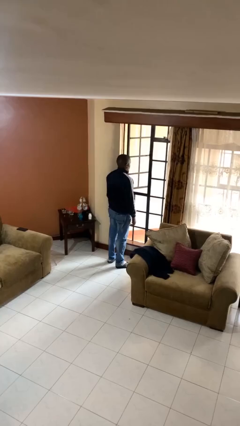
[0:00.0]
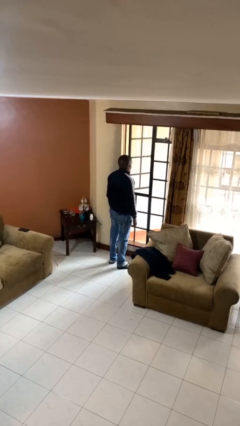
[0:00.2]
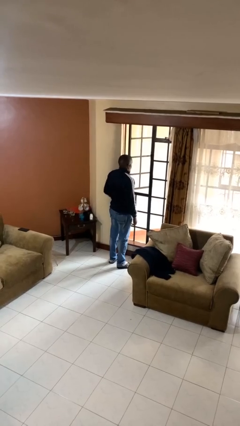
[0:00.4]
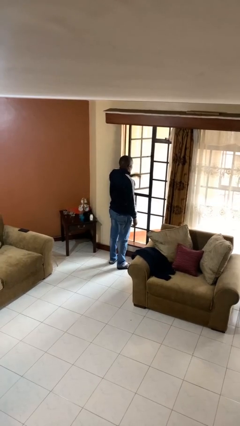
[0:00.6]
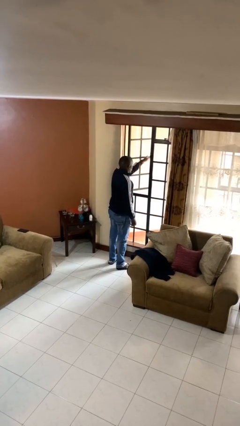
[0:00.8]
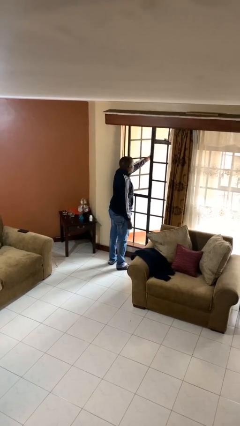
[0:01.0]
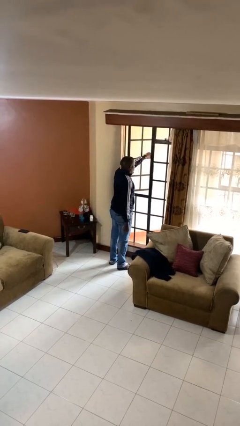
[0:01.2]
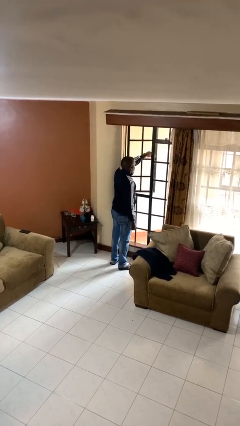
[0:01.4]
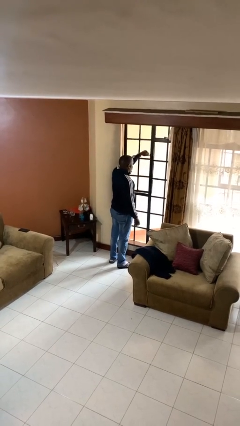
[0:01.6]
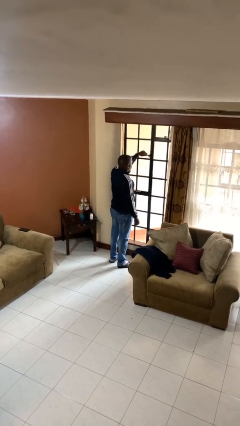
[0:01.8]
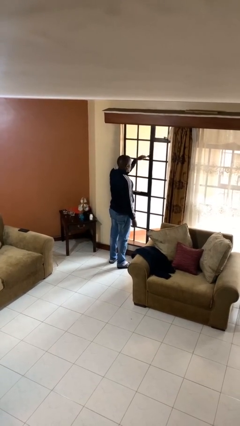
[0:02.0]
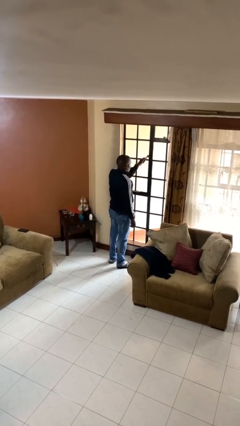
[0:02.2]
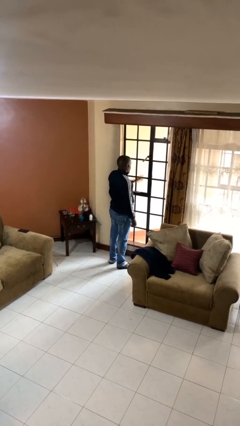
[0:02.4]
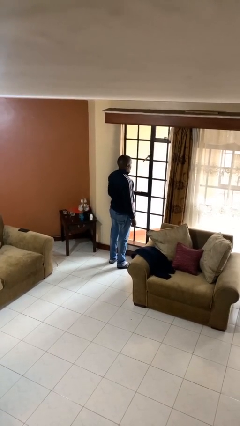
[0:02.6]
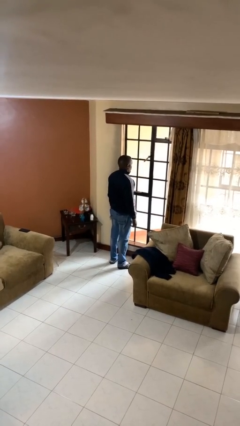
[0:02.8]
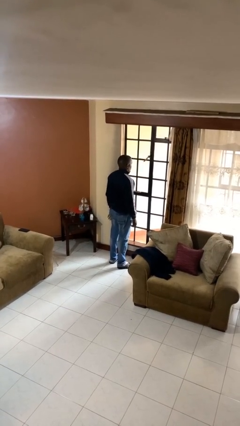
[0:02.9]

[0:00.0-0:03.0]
person closes home window

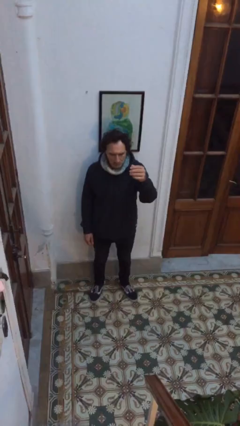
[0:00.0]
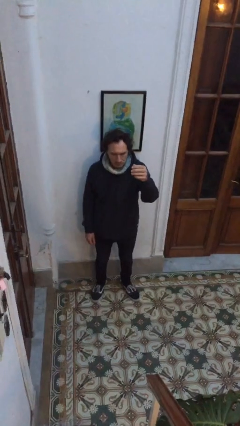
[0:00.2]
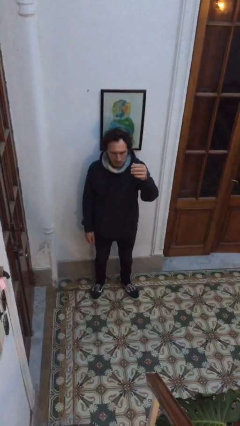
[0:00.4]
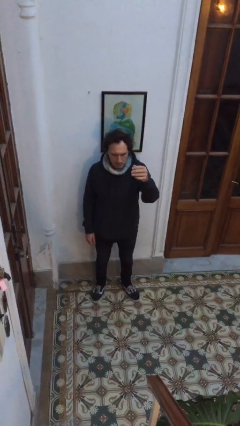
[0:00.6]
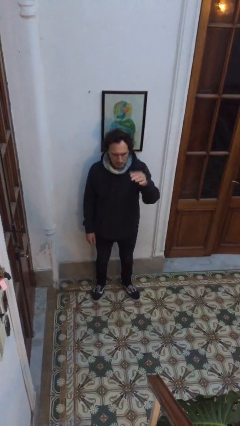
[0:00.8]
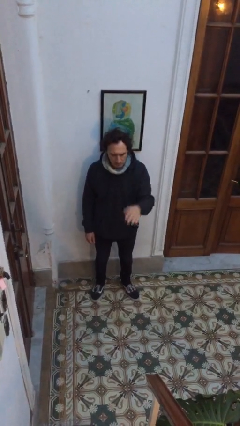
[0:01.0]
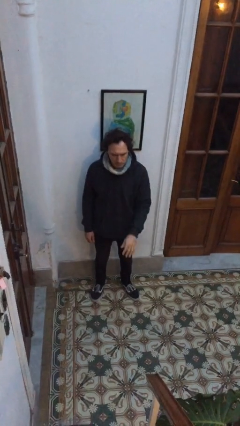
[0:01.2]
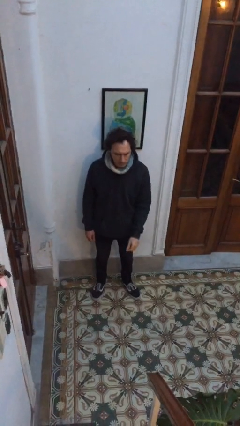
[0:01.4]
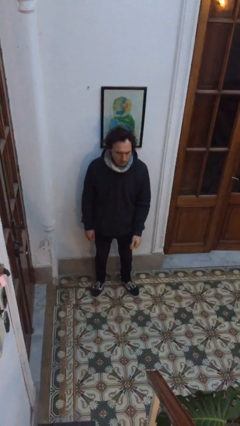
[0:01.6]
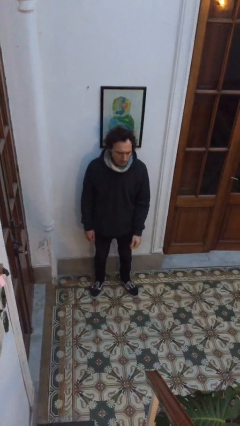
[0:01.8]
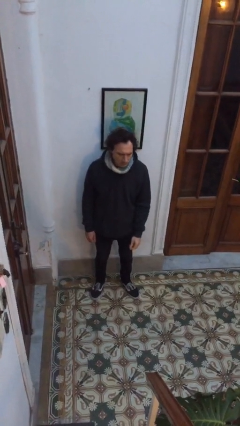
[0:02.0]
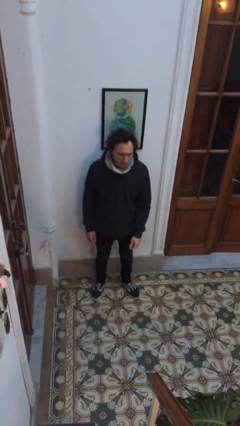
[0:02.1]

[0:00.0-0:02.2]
person gestures swipe down

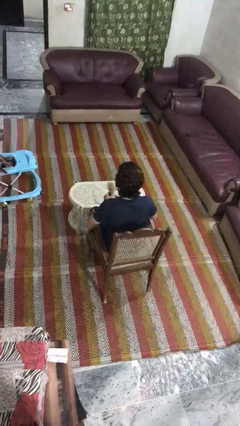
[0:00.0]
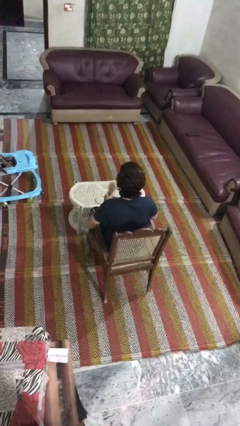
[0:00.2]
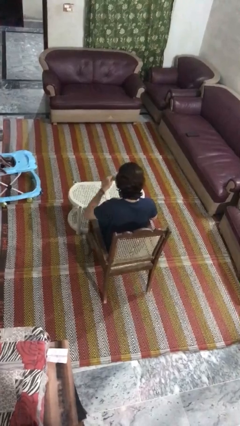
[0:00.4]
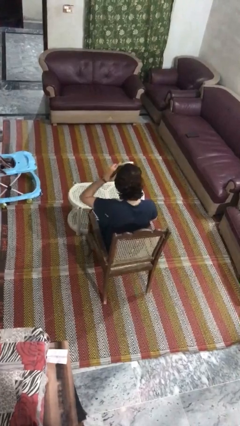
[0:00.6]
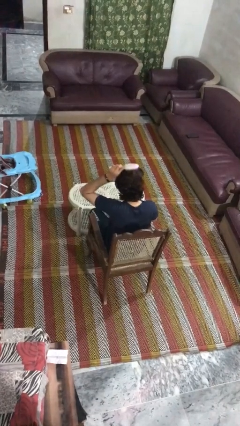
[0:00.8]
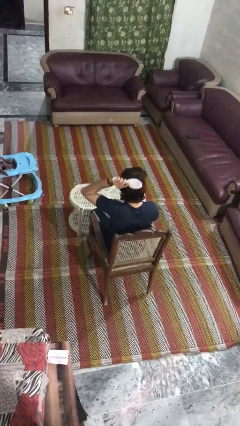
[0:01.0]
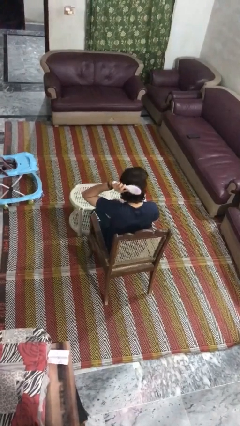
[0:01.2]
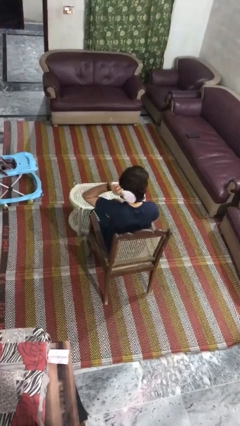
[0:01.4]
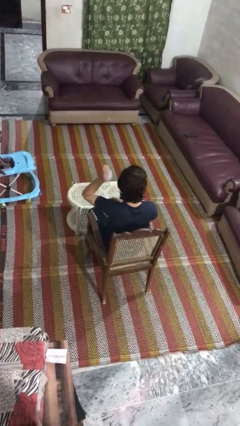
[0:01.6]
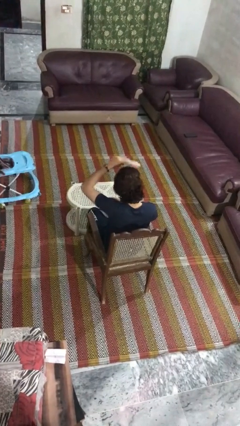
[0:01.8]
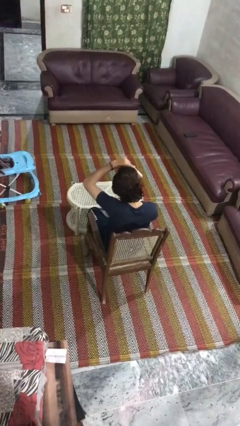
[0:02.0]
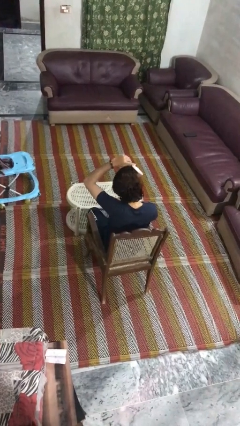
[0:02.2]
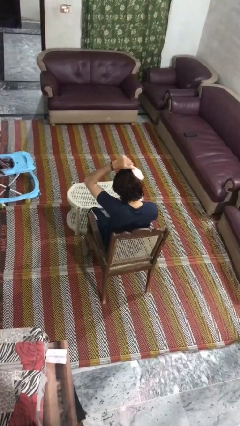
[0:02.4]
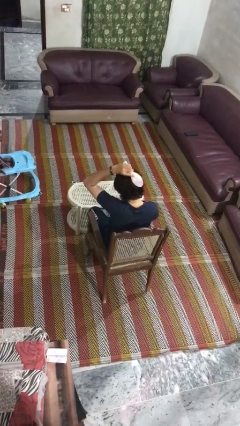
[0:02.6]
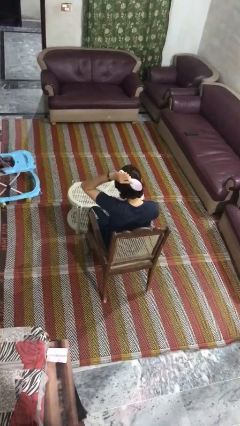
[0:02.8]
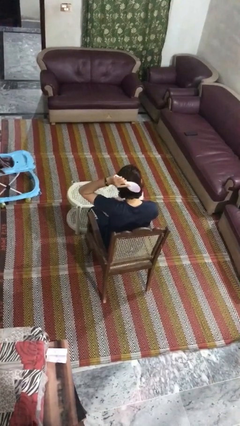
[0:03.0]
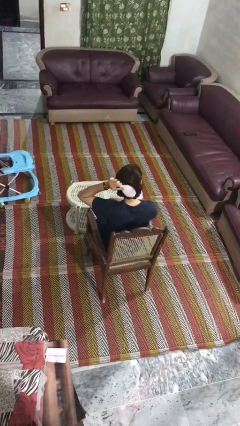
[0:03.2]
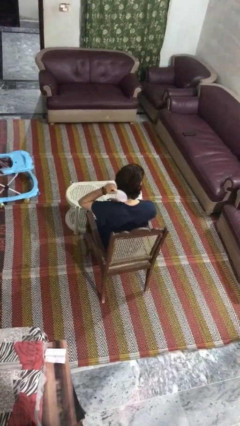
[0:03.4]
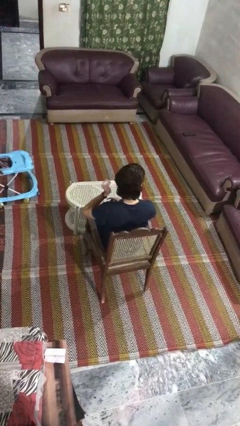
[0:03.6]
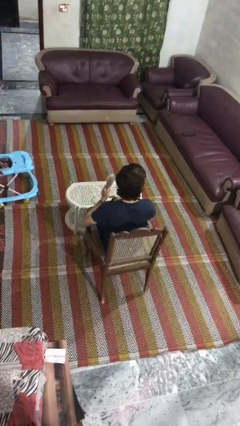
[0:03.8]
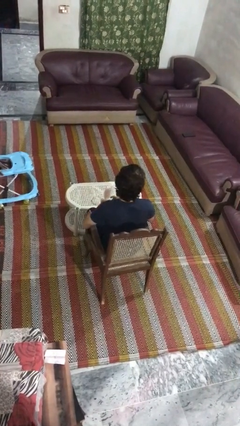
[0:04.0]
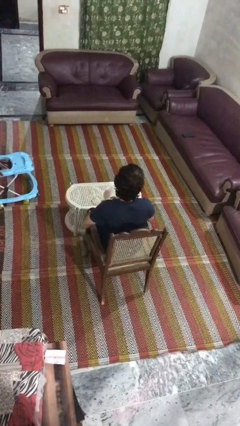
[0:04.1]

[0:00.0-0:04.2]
person brushes hair

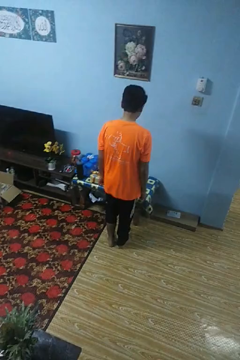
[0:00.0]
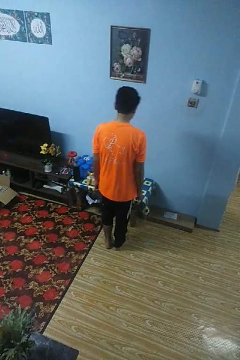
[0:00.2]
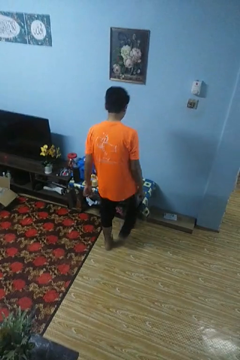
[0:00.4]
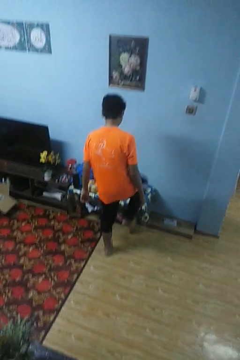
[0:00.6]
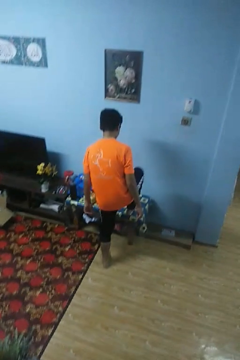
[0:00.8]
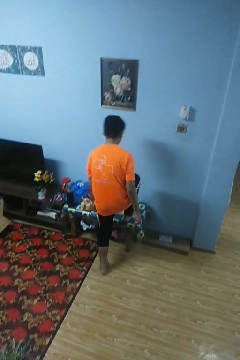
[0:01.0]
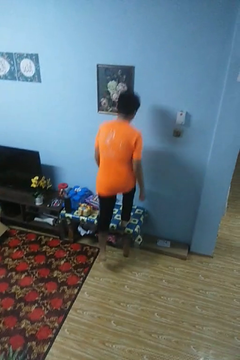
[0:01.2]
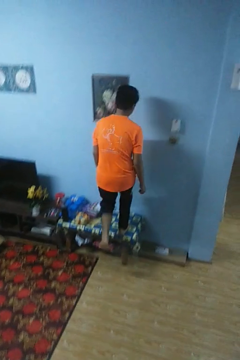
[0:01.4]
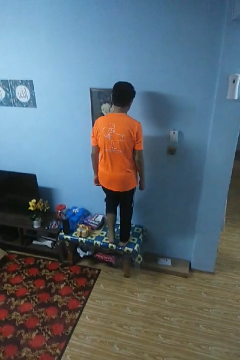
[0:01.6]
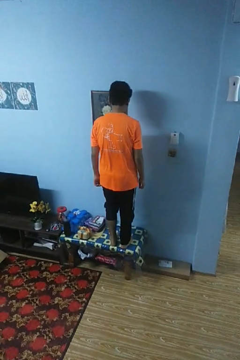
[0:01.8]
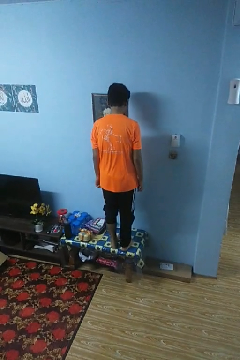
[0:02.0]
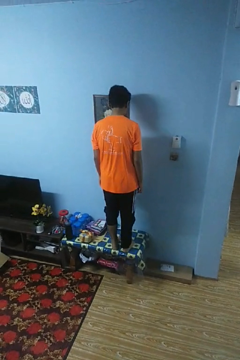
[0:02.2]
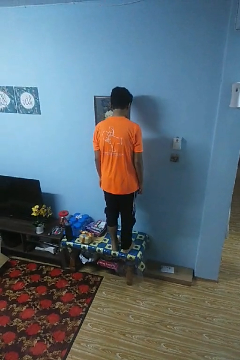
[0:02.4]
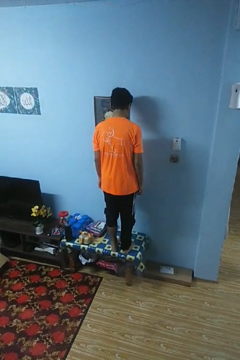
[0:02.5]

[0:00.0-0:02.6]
person climbs on table

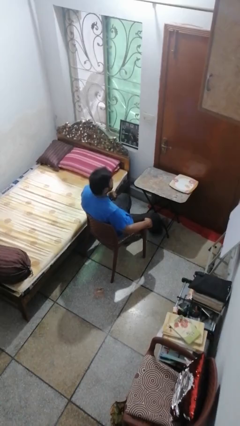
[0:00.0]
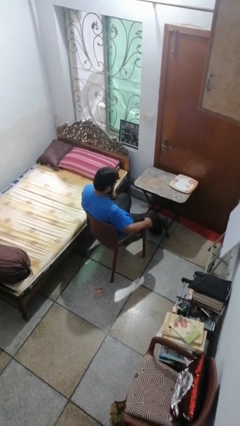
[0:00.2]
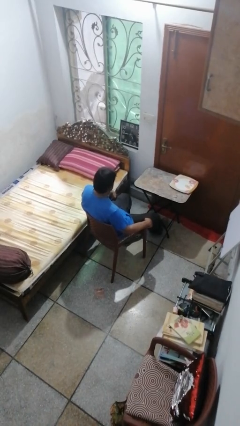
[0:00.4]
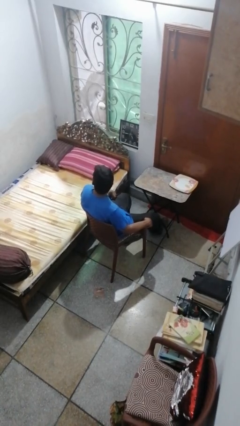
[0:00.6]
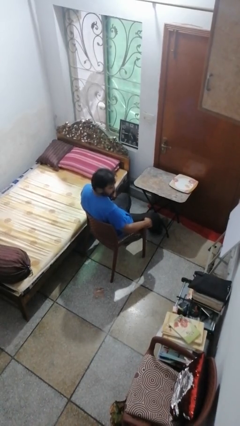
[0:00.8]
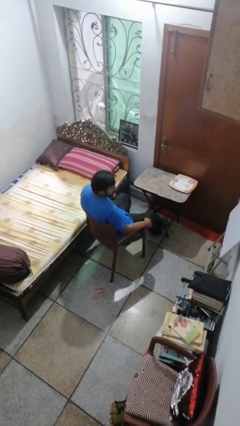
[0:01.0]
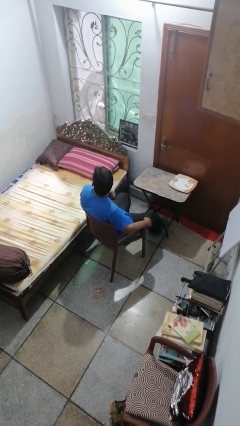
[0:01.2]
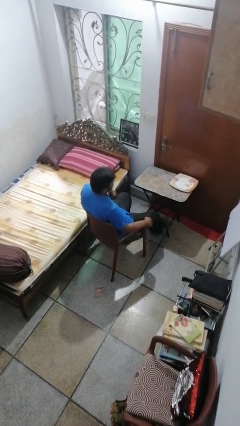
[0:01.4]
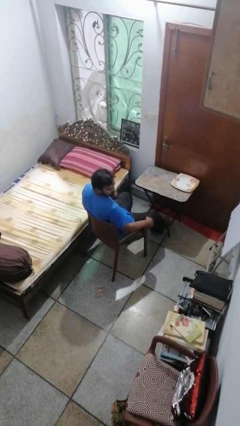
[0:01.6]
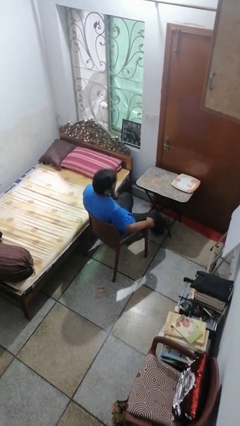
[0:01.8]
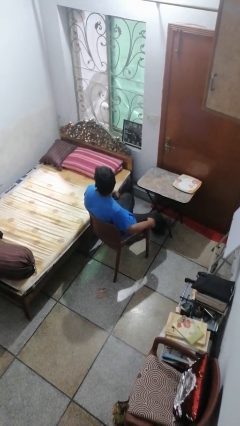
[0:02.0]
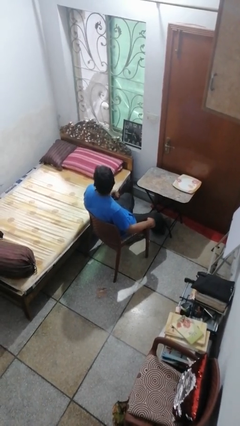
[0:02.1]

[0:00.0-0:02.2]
person shakes head

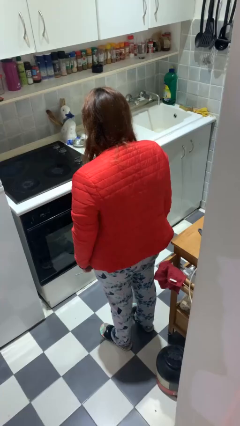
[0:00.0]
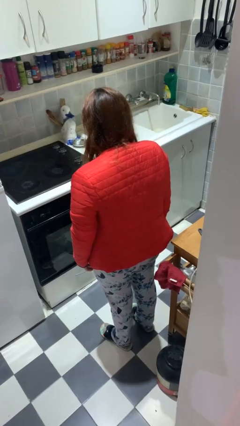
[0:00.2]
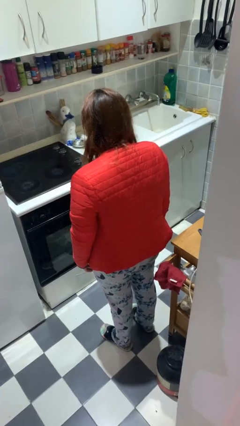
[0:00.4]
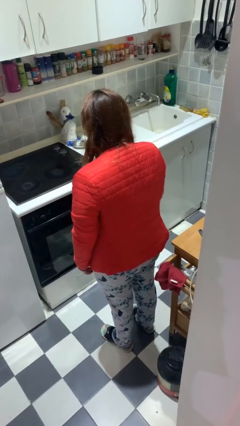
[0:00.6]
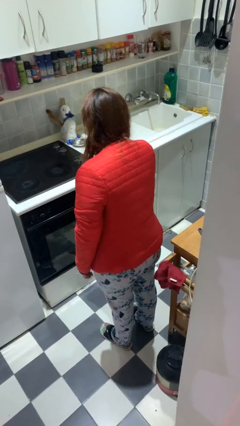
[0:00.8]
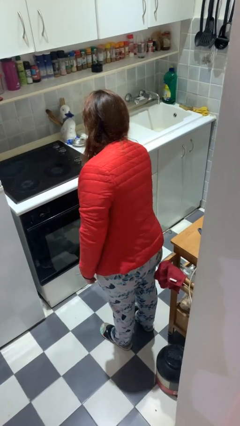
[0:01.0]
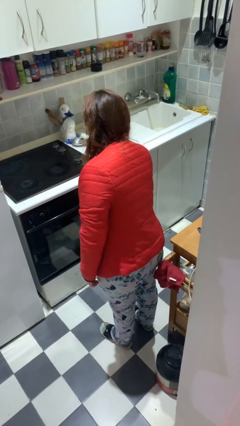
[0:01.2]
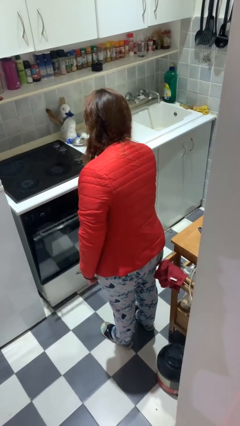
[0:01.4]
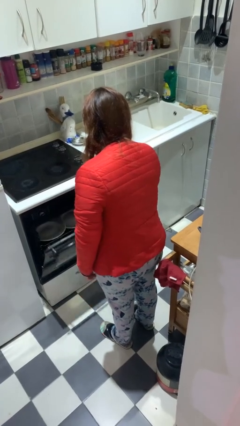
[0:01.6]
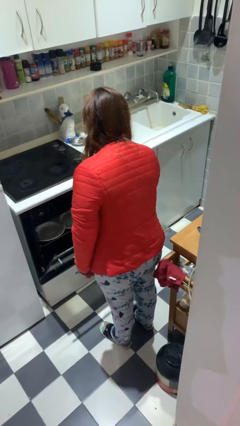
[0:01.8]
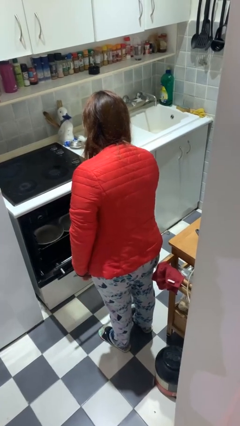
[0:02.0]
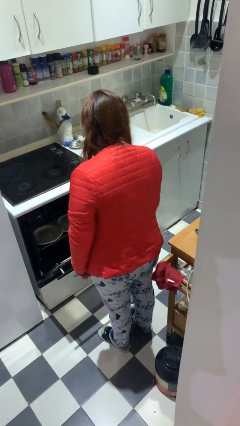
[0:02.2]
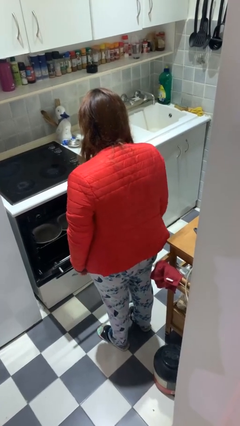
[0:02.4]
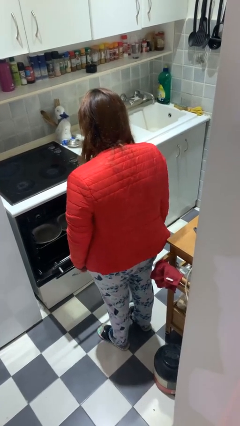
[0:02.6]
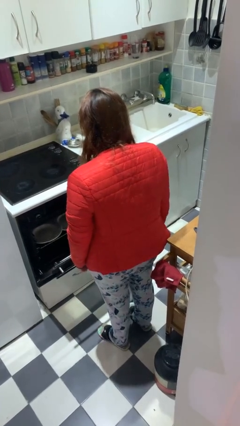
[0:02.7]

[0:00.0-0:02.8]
person opens dishwasher
